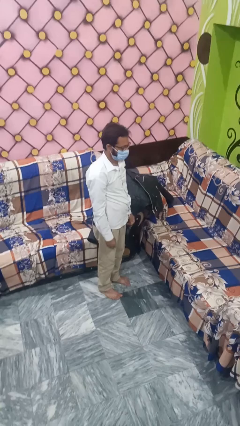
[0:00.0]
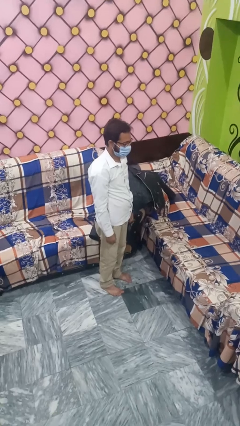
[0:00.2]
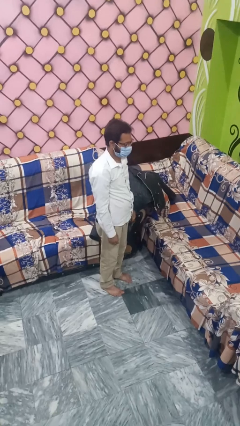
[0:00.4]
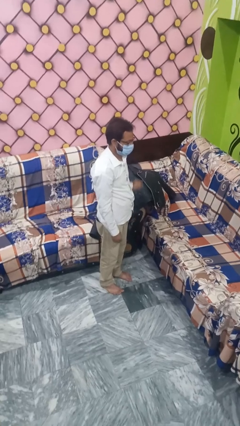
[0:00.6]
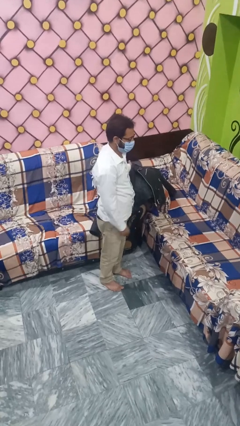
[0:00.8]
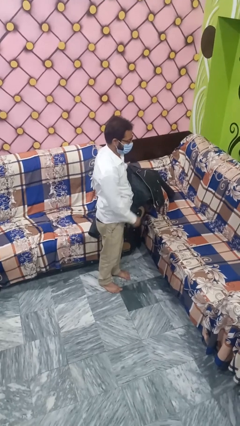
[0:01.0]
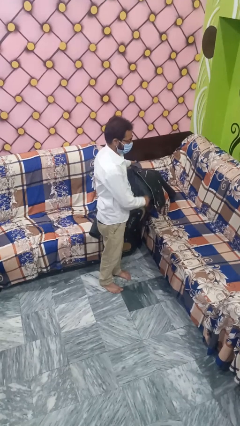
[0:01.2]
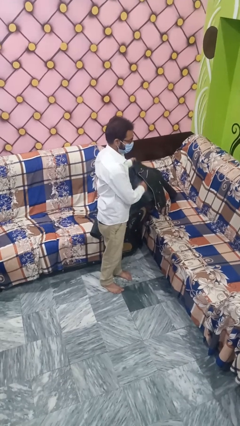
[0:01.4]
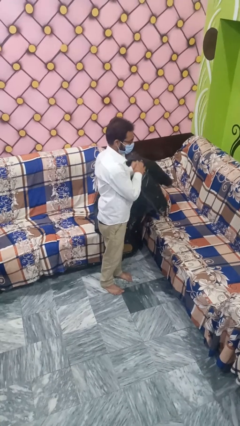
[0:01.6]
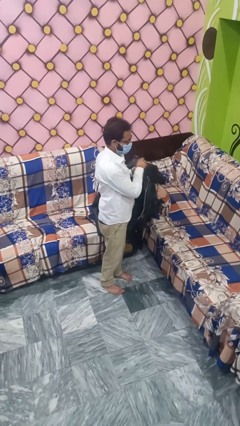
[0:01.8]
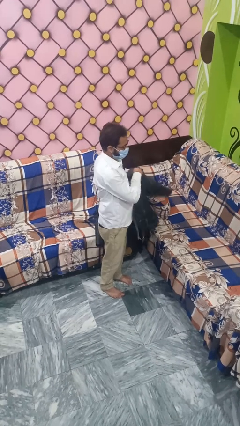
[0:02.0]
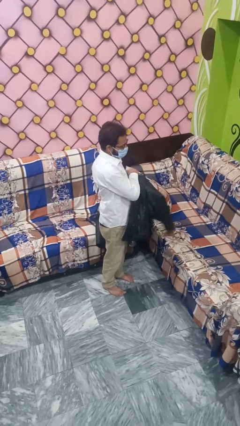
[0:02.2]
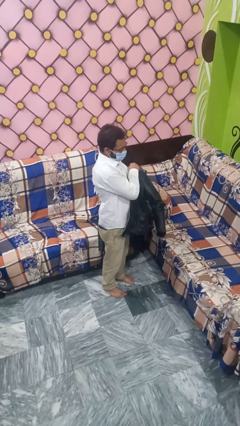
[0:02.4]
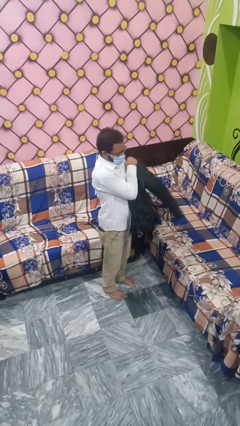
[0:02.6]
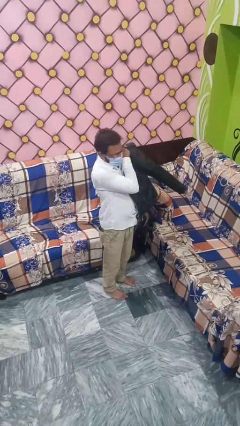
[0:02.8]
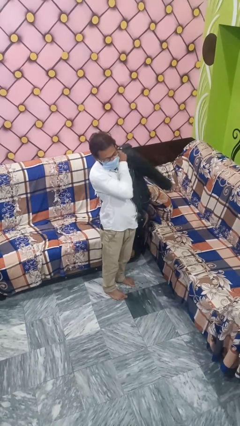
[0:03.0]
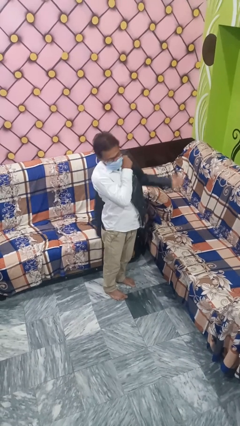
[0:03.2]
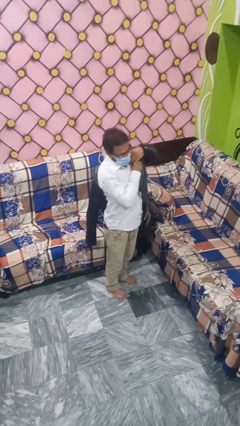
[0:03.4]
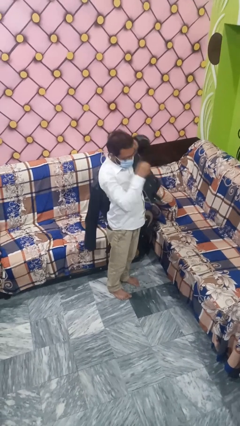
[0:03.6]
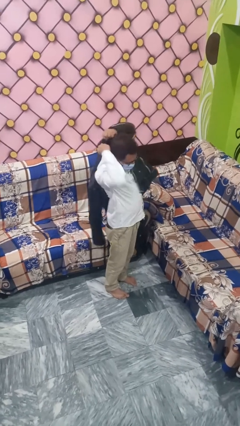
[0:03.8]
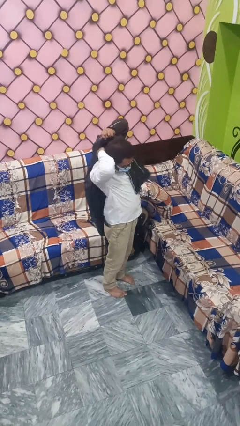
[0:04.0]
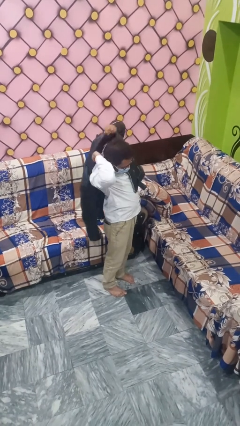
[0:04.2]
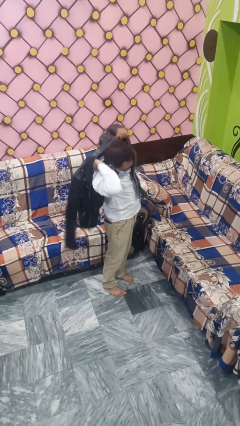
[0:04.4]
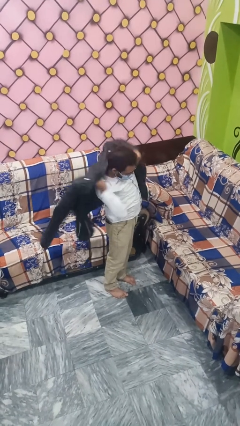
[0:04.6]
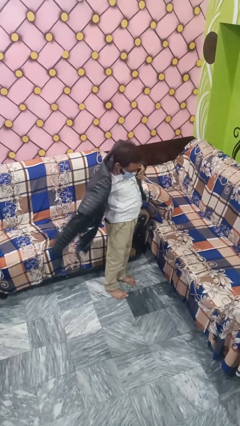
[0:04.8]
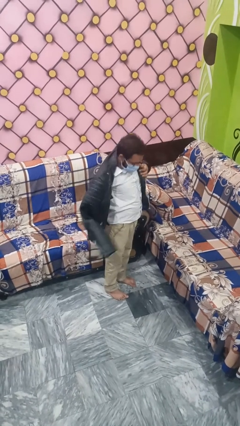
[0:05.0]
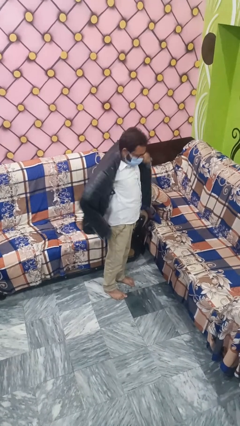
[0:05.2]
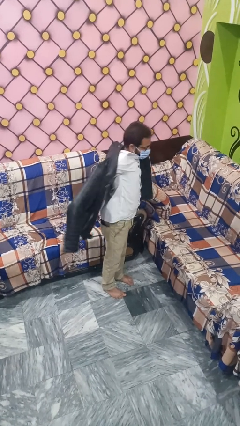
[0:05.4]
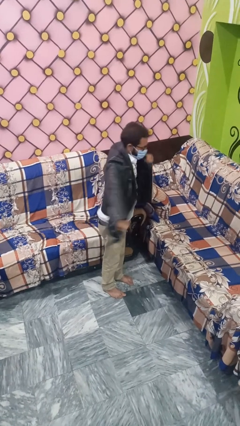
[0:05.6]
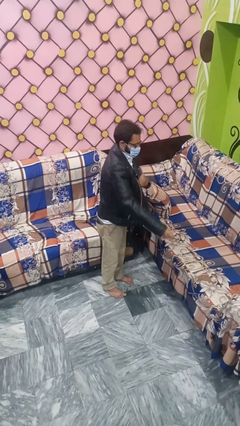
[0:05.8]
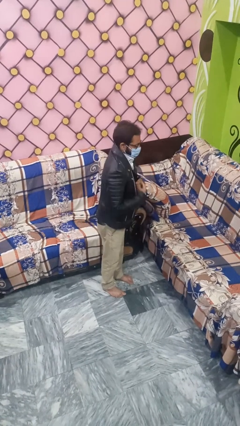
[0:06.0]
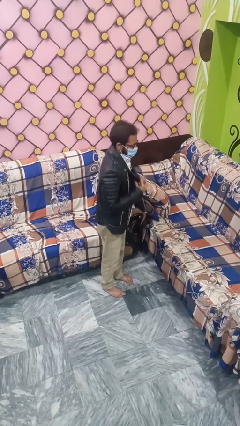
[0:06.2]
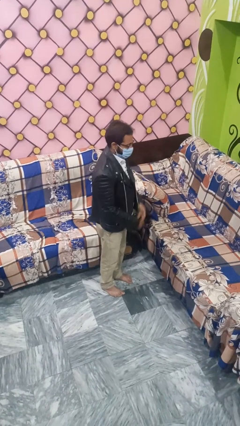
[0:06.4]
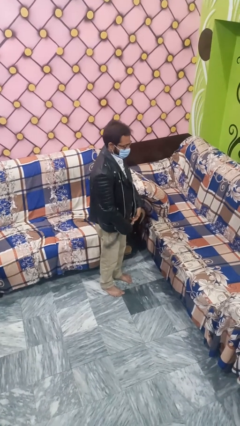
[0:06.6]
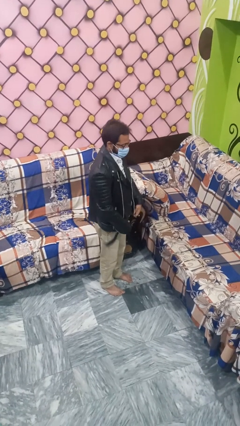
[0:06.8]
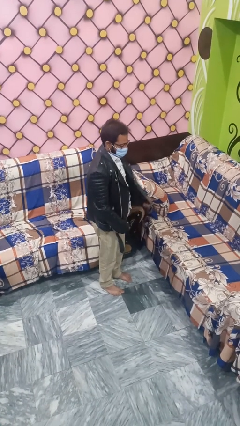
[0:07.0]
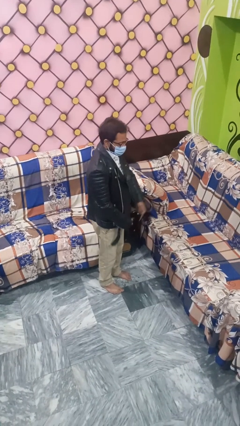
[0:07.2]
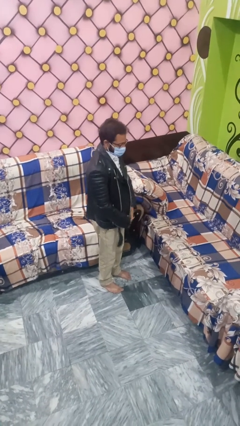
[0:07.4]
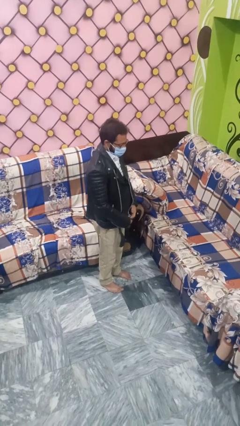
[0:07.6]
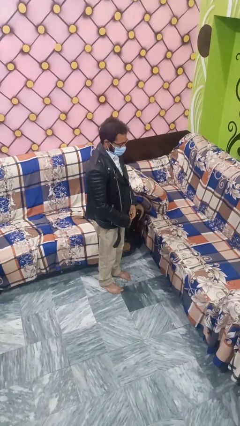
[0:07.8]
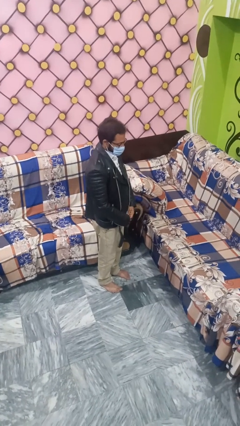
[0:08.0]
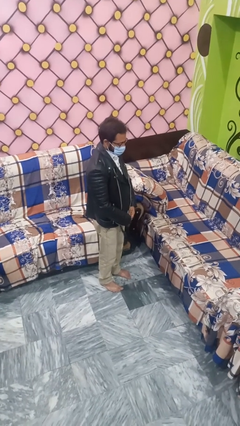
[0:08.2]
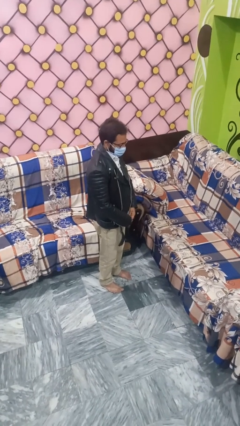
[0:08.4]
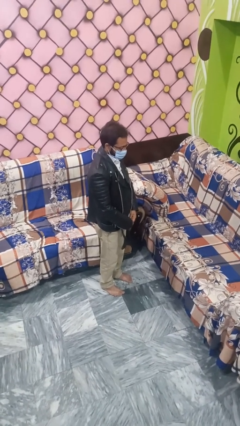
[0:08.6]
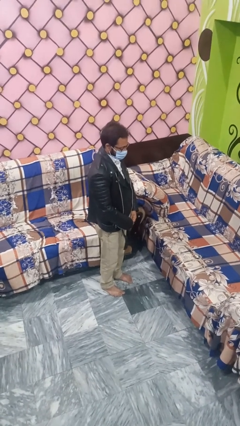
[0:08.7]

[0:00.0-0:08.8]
person puts on jacket

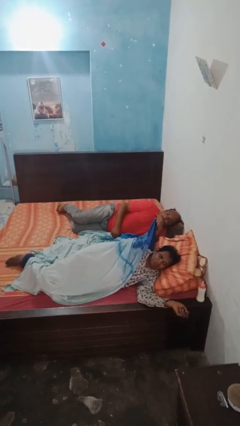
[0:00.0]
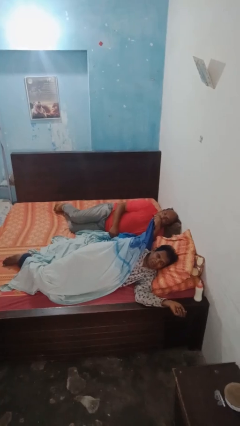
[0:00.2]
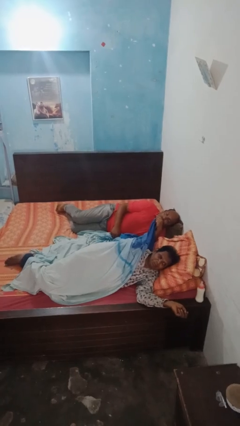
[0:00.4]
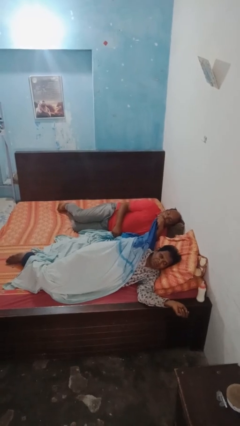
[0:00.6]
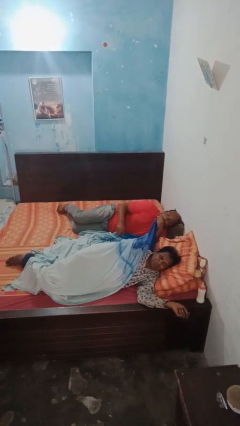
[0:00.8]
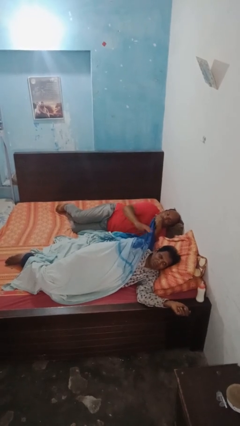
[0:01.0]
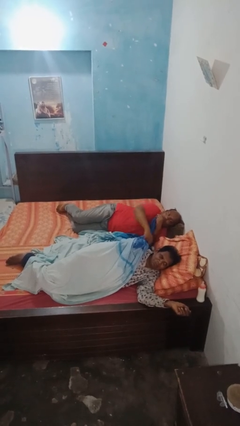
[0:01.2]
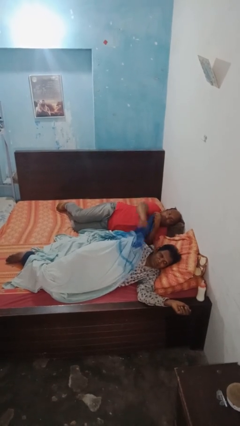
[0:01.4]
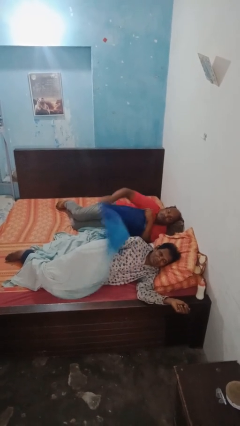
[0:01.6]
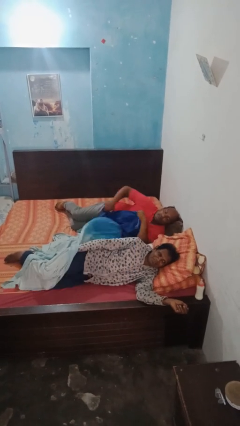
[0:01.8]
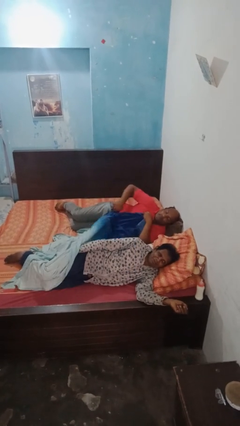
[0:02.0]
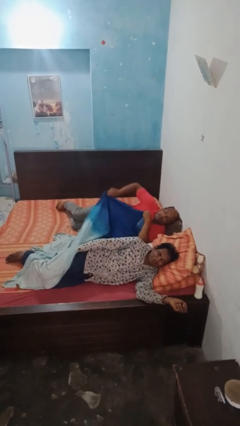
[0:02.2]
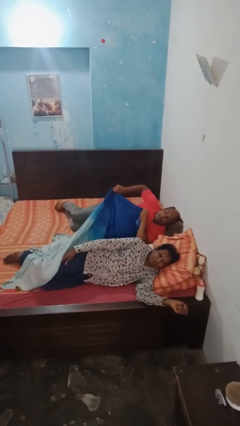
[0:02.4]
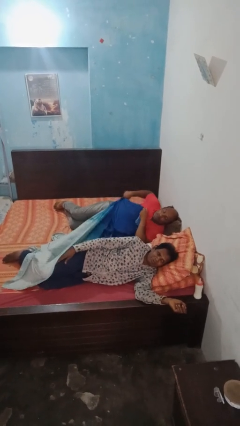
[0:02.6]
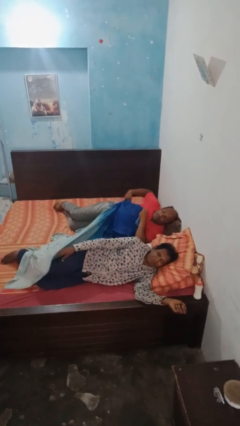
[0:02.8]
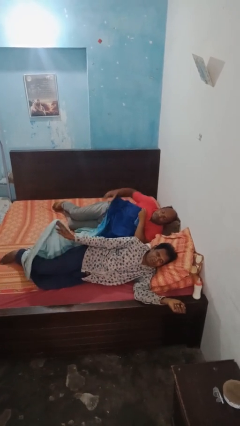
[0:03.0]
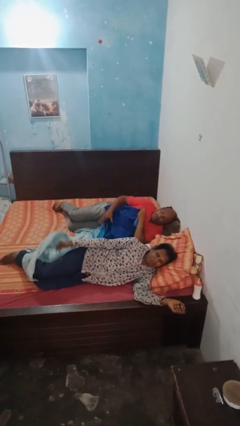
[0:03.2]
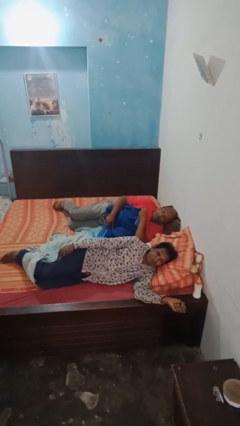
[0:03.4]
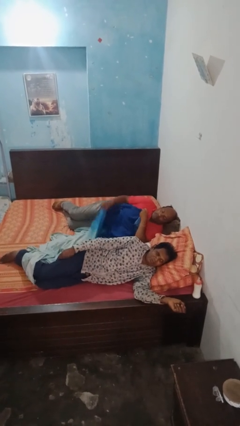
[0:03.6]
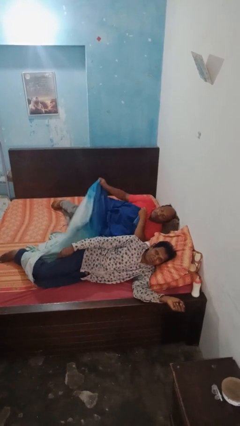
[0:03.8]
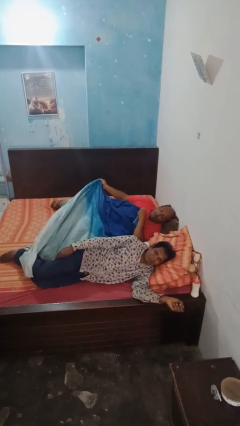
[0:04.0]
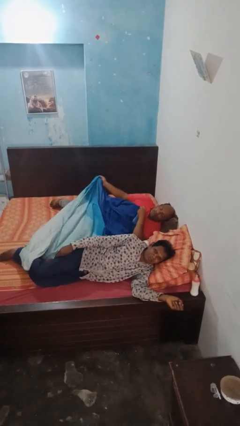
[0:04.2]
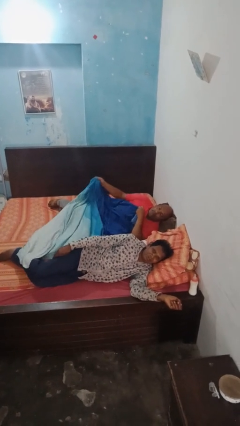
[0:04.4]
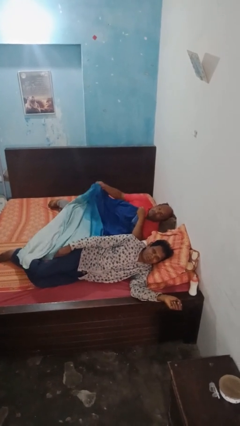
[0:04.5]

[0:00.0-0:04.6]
person uncovers friend with blanket

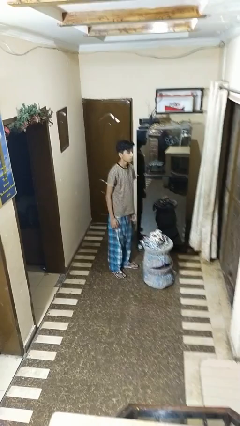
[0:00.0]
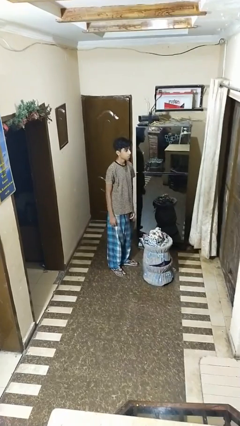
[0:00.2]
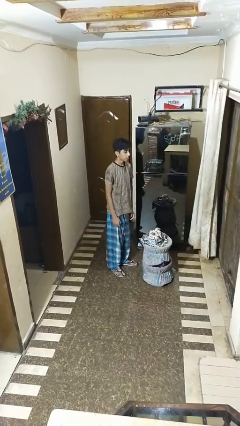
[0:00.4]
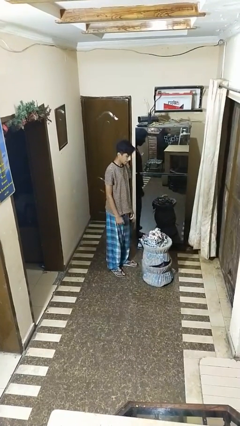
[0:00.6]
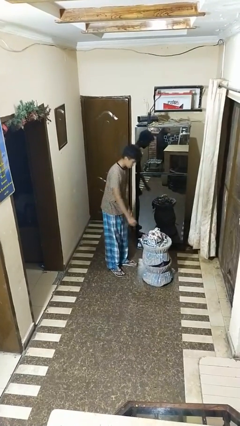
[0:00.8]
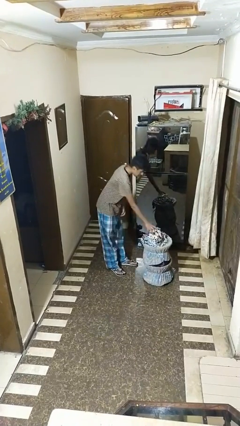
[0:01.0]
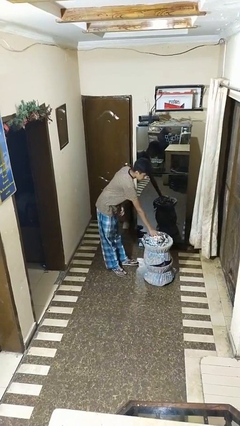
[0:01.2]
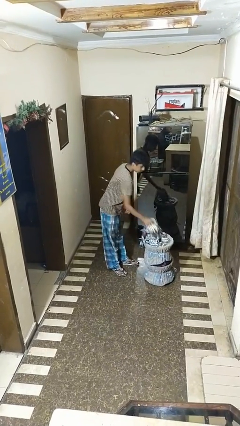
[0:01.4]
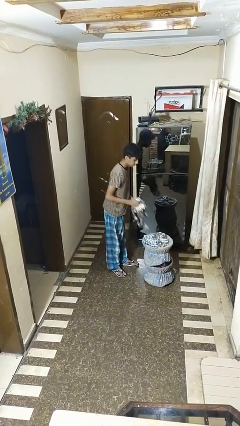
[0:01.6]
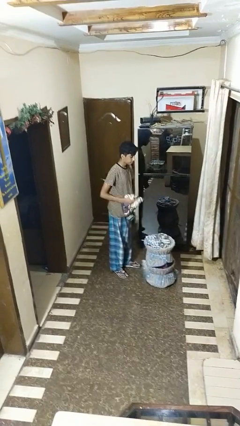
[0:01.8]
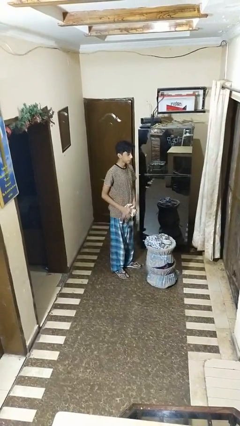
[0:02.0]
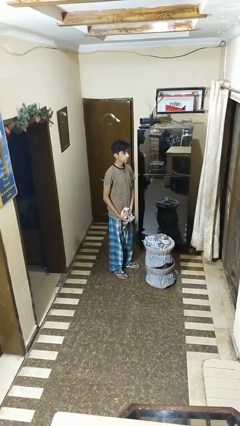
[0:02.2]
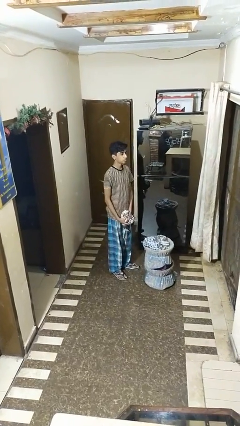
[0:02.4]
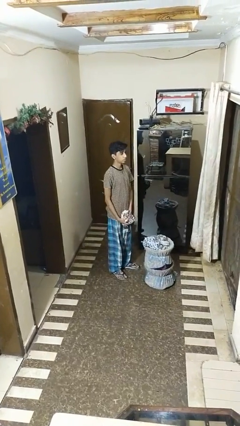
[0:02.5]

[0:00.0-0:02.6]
person takes object from basket

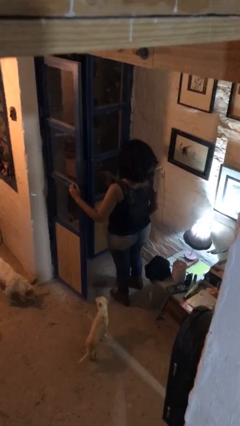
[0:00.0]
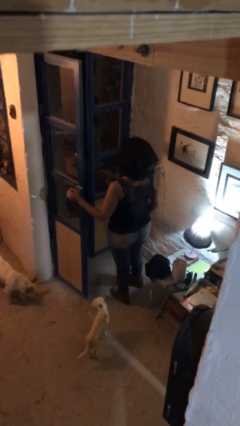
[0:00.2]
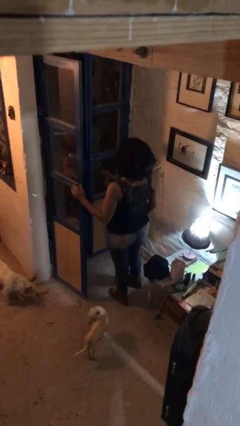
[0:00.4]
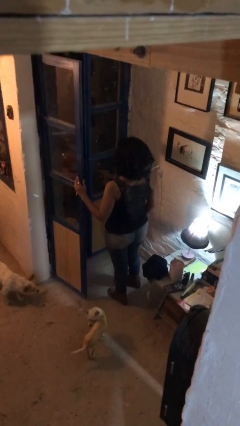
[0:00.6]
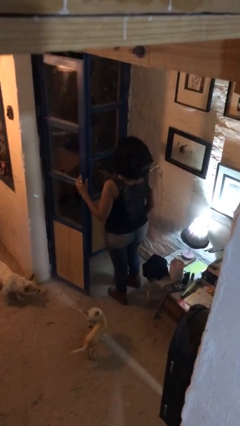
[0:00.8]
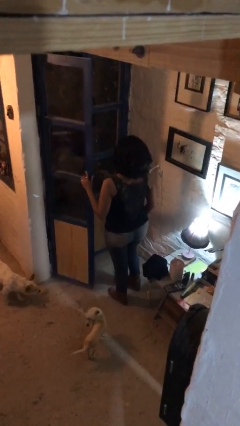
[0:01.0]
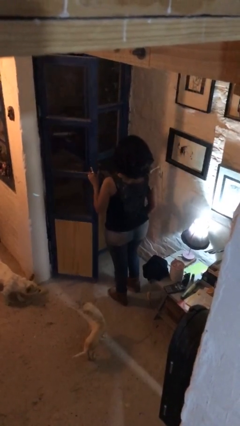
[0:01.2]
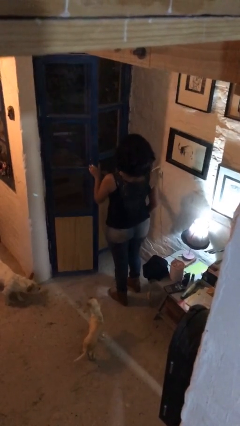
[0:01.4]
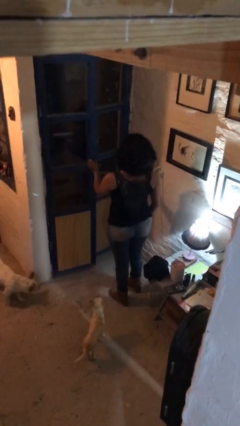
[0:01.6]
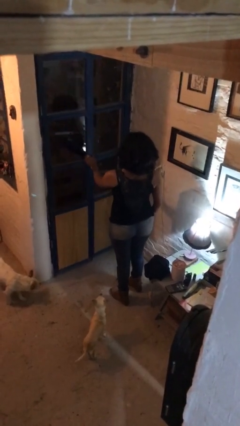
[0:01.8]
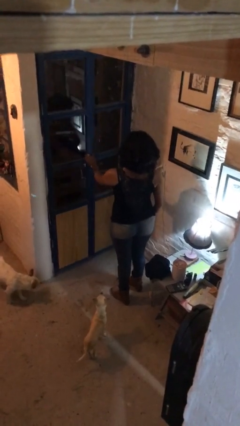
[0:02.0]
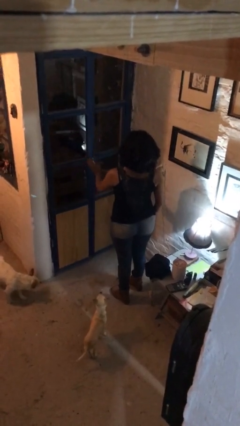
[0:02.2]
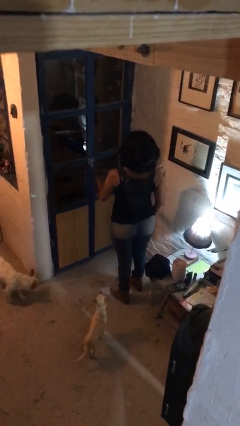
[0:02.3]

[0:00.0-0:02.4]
person closes facility door
